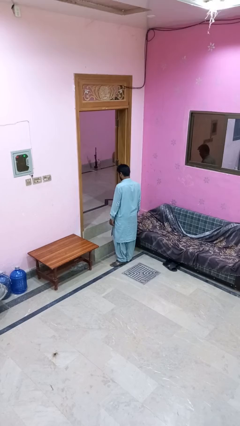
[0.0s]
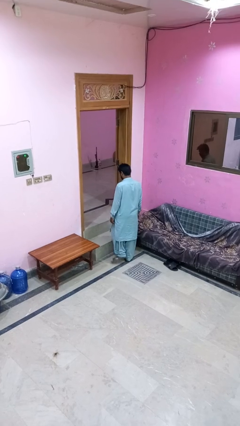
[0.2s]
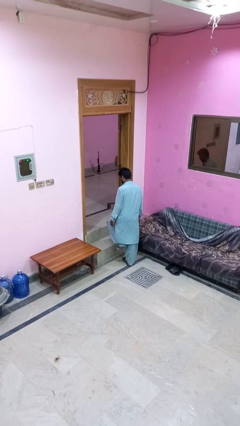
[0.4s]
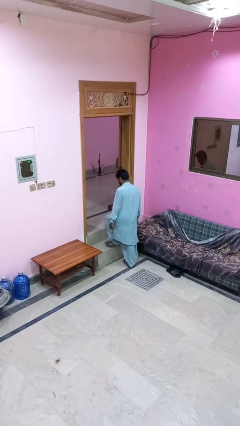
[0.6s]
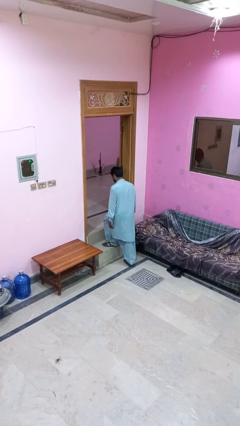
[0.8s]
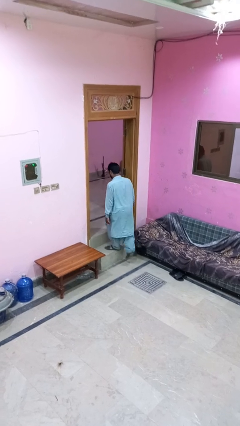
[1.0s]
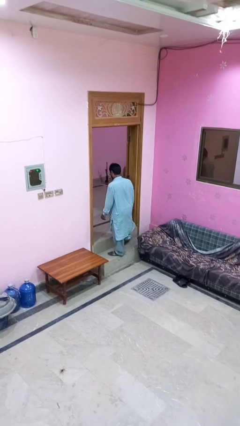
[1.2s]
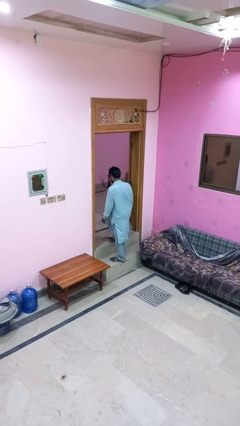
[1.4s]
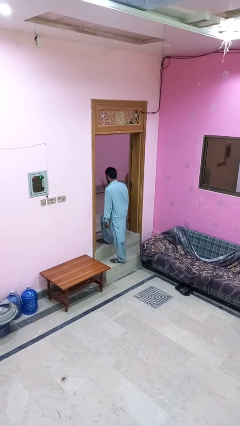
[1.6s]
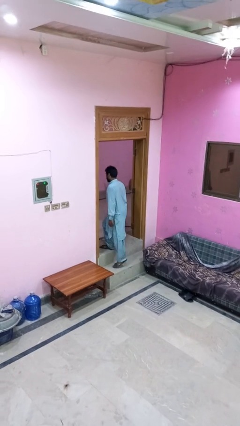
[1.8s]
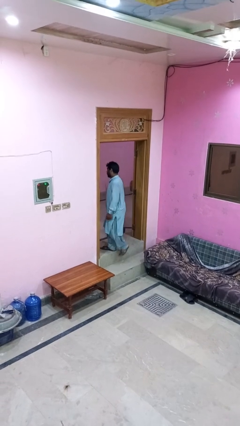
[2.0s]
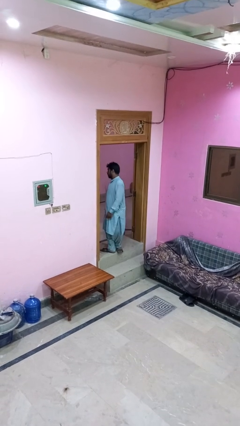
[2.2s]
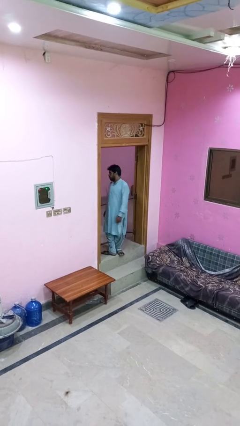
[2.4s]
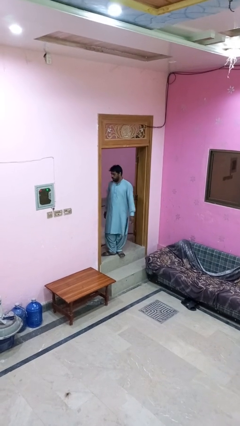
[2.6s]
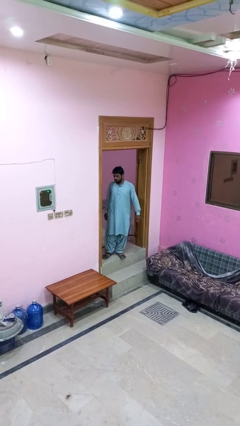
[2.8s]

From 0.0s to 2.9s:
person climbs up stairs

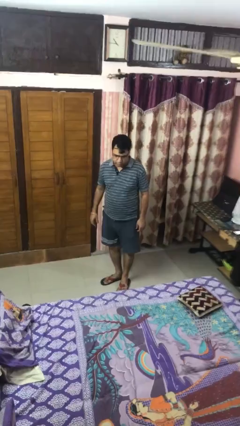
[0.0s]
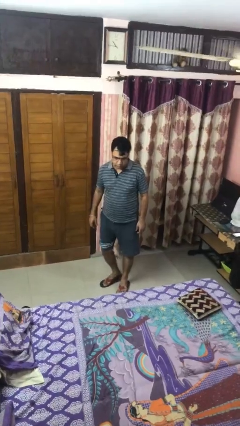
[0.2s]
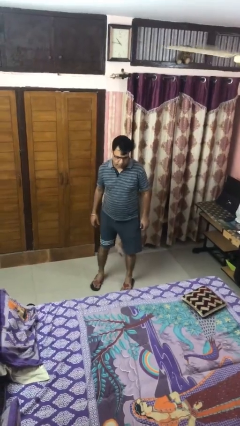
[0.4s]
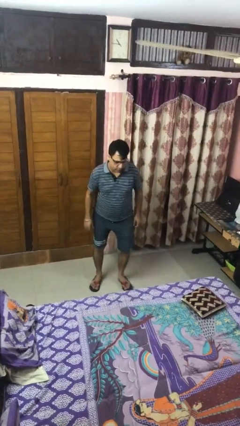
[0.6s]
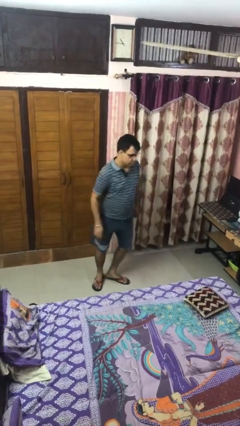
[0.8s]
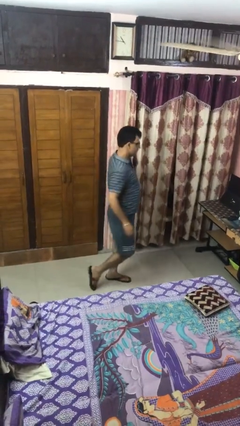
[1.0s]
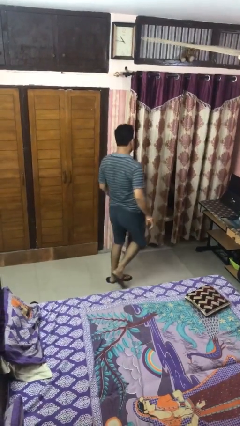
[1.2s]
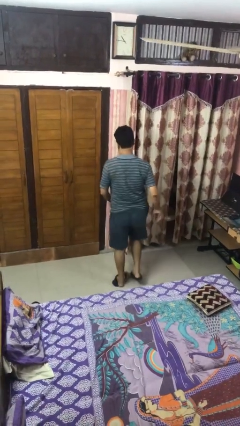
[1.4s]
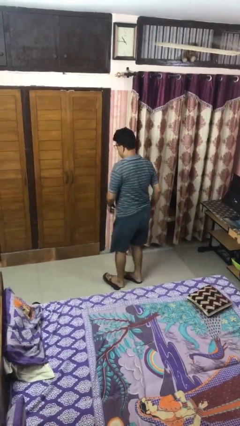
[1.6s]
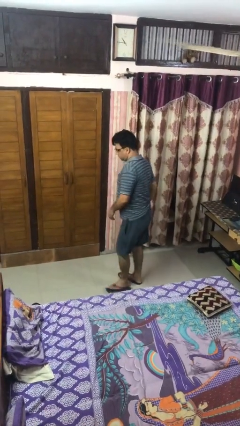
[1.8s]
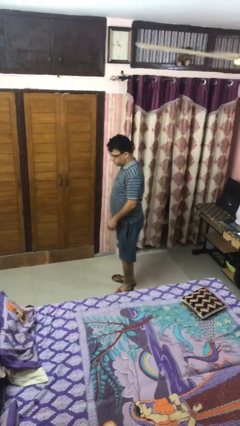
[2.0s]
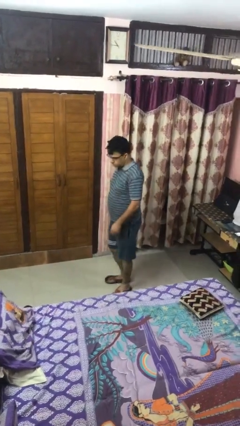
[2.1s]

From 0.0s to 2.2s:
person twirls

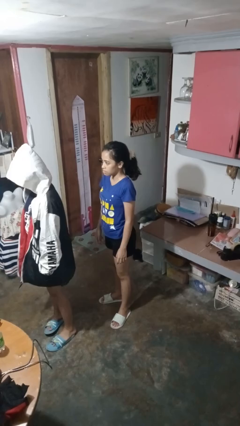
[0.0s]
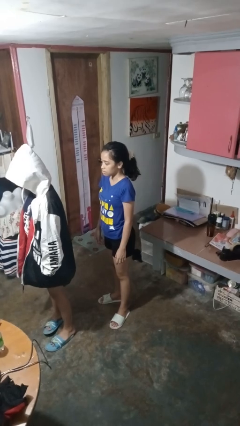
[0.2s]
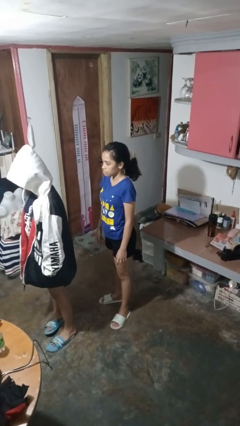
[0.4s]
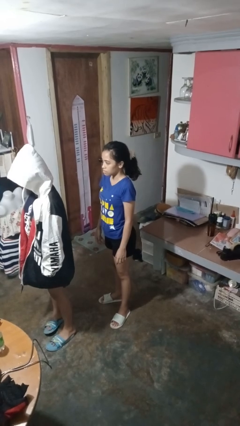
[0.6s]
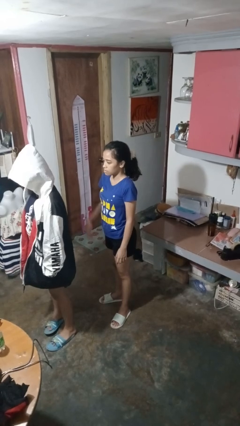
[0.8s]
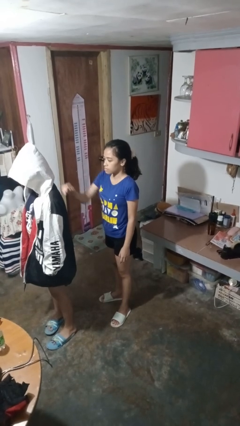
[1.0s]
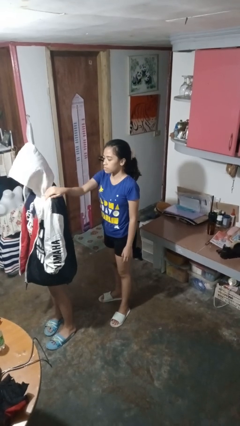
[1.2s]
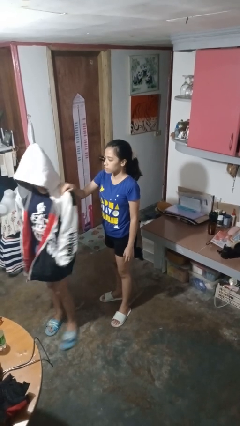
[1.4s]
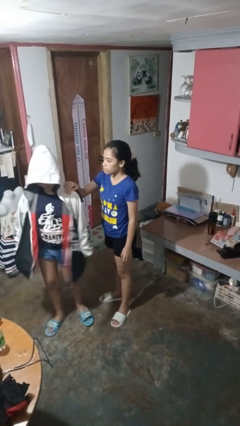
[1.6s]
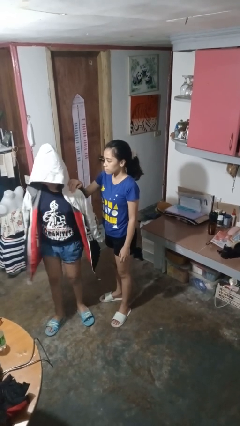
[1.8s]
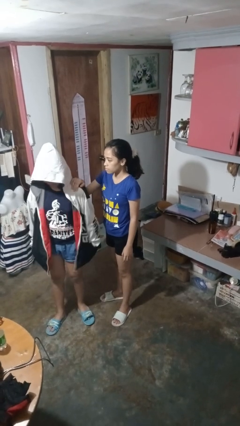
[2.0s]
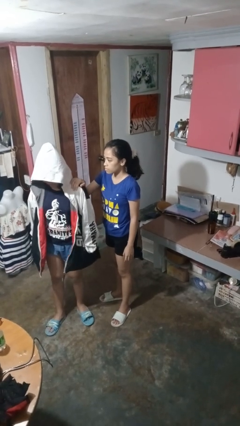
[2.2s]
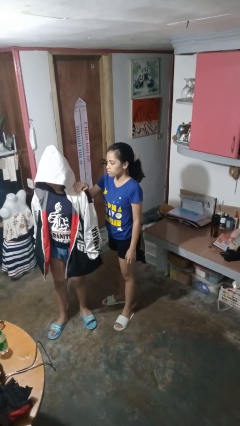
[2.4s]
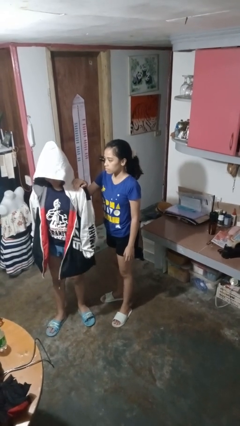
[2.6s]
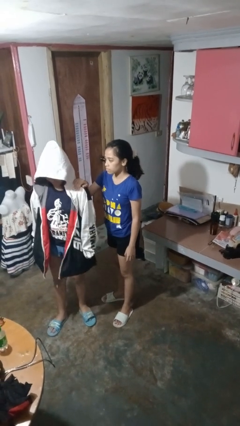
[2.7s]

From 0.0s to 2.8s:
person grabs person by shoulder

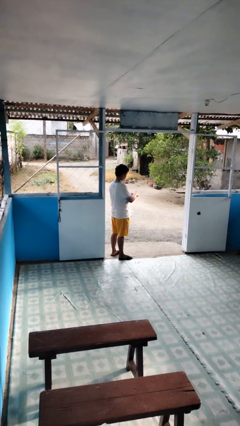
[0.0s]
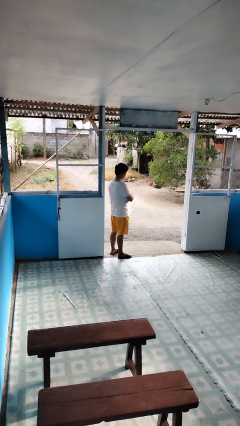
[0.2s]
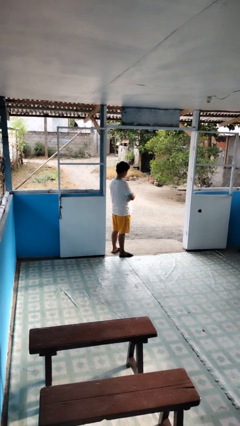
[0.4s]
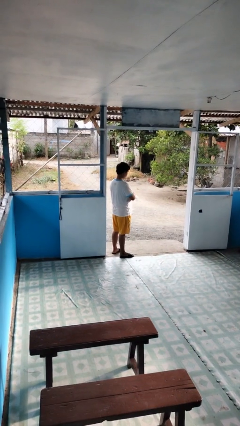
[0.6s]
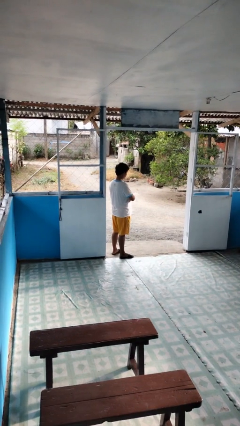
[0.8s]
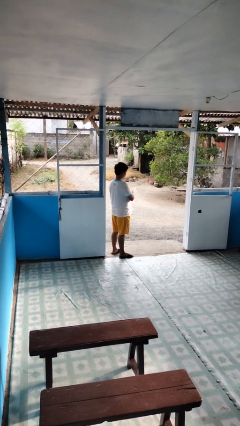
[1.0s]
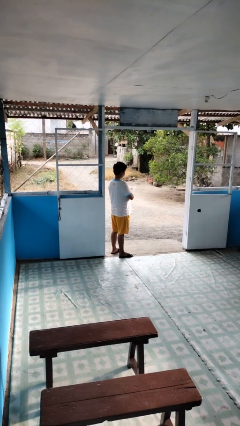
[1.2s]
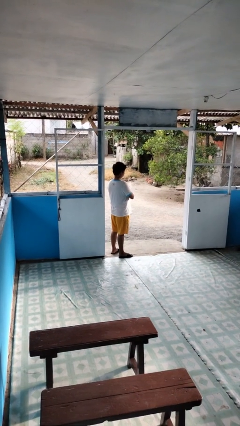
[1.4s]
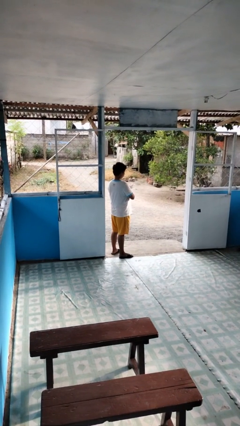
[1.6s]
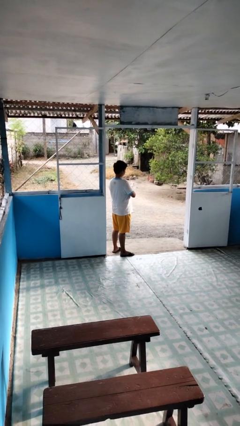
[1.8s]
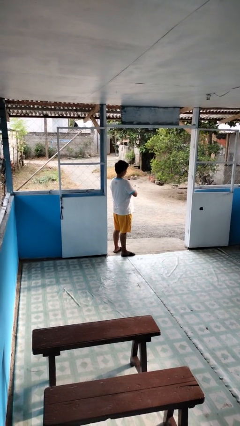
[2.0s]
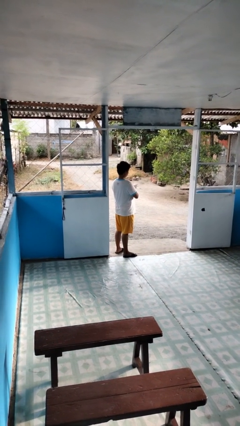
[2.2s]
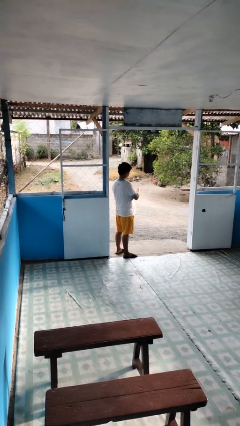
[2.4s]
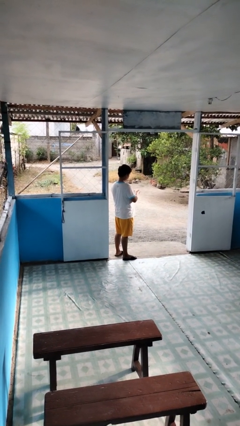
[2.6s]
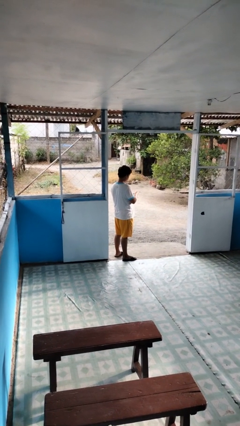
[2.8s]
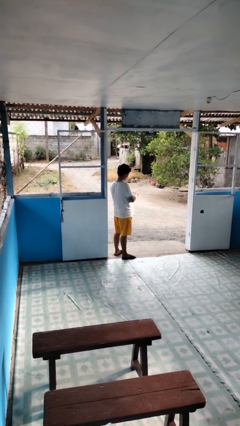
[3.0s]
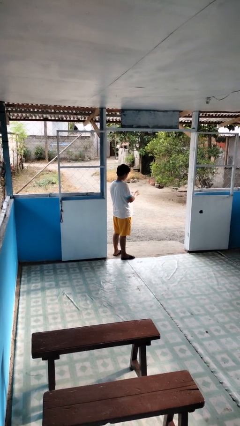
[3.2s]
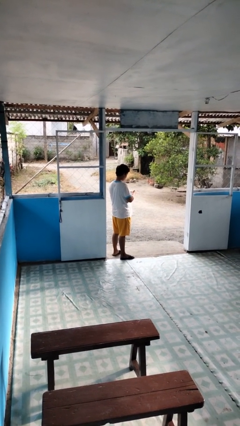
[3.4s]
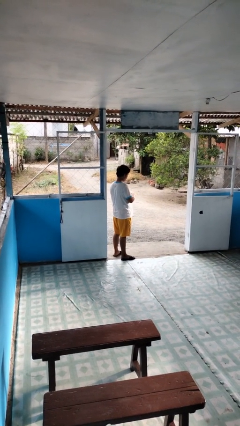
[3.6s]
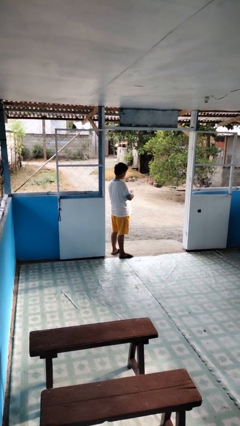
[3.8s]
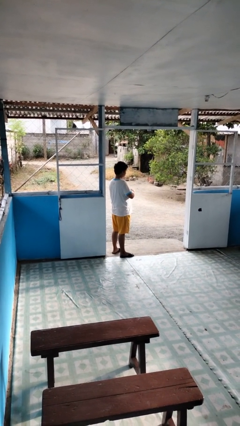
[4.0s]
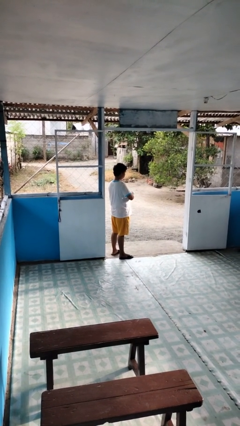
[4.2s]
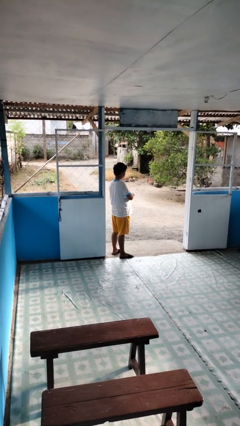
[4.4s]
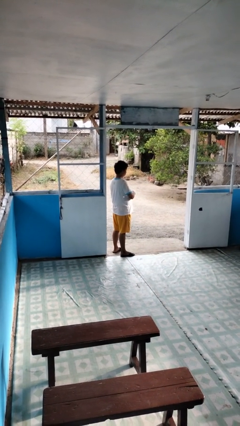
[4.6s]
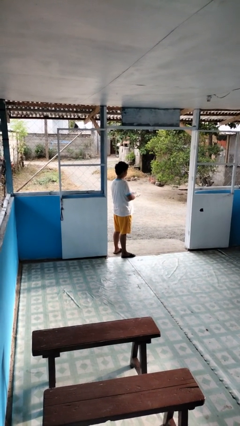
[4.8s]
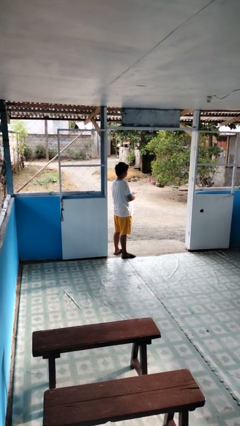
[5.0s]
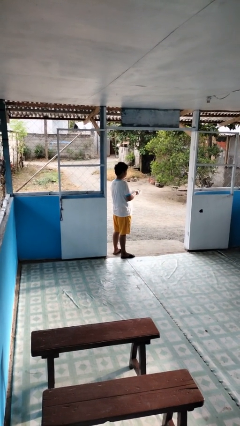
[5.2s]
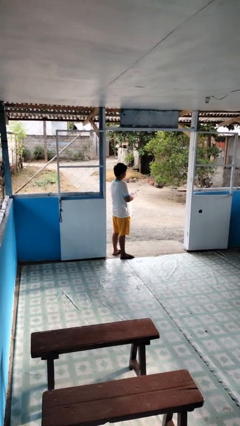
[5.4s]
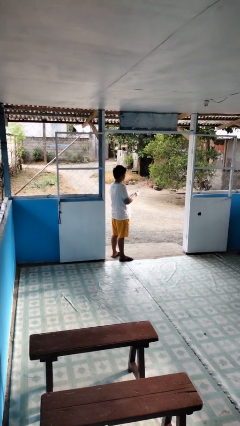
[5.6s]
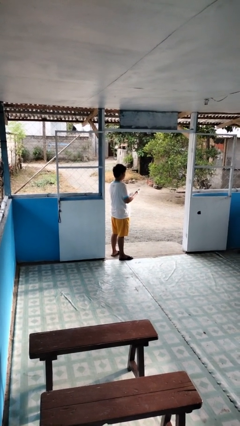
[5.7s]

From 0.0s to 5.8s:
person puts on gloves

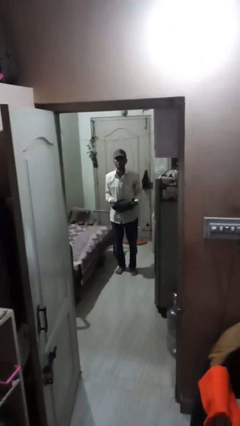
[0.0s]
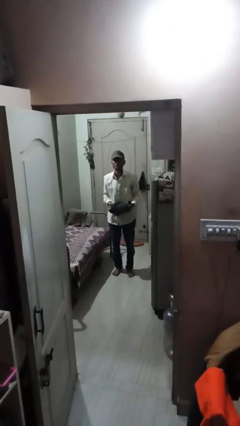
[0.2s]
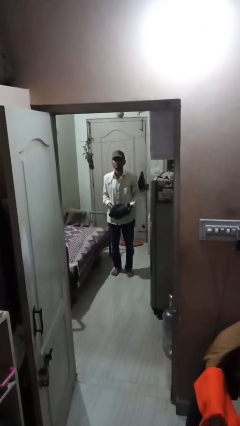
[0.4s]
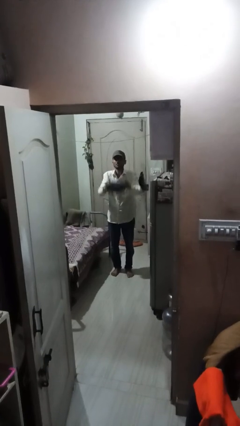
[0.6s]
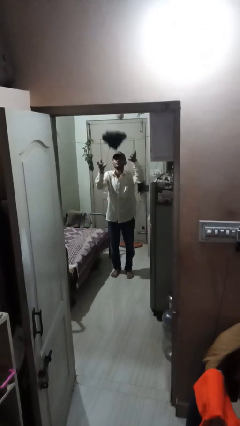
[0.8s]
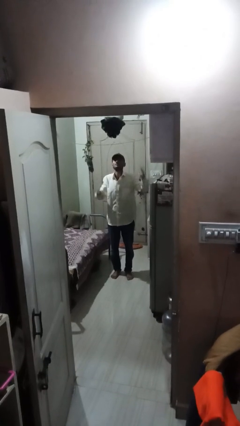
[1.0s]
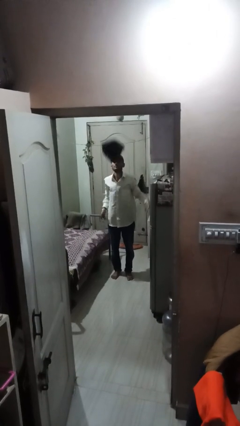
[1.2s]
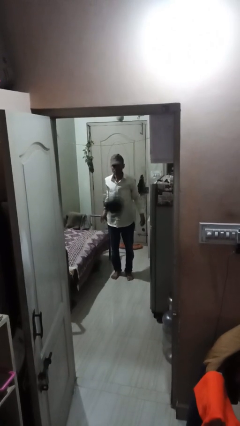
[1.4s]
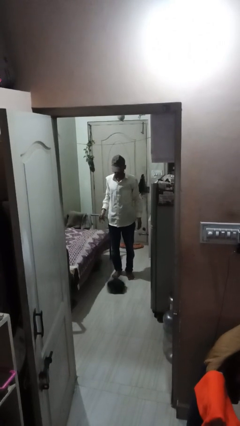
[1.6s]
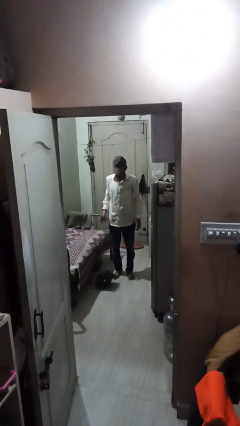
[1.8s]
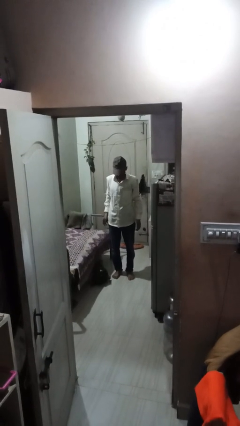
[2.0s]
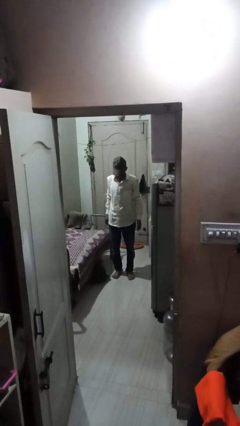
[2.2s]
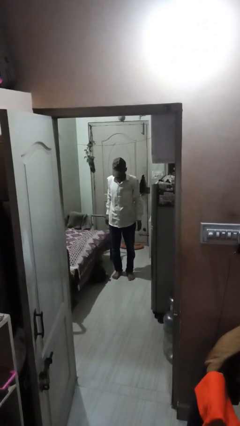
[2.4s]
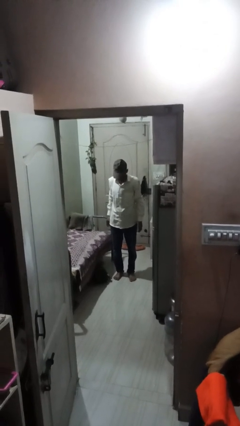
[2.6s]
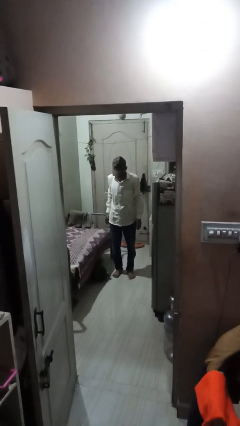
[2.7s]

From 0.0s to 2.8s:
person throws object into air

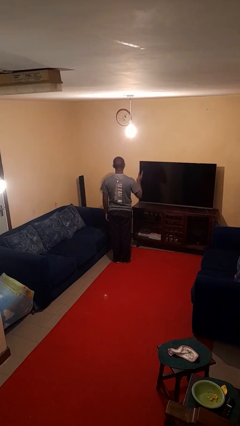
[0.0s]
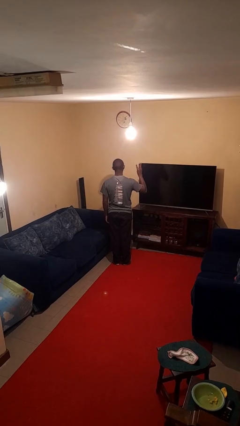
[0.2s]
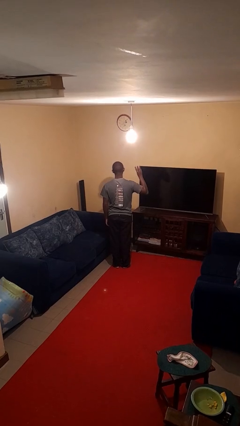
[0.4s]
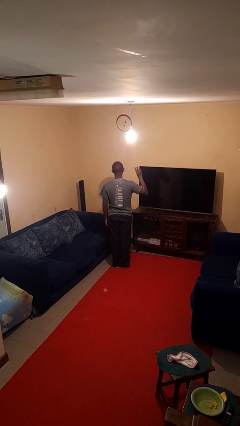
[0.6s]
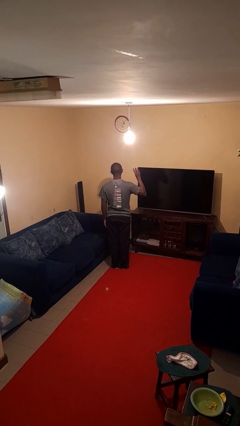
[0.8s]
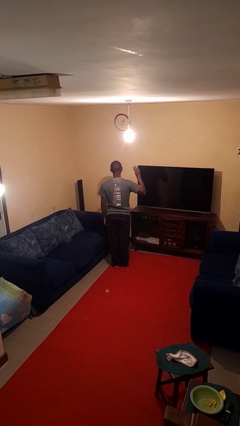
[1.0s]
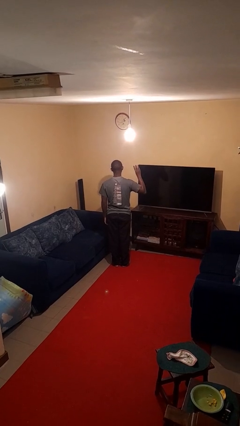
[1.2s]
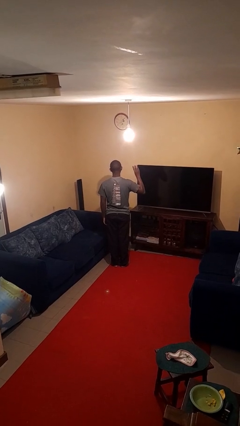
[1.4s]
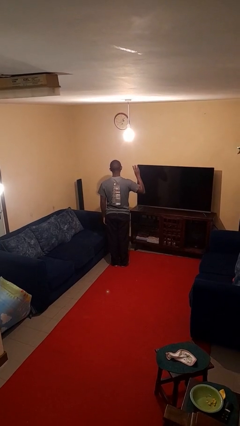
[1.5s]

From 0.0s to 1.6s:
person gestures number three
